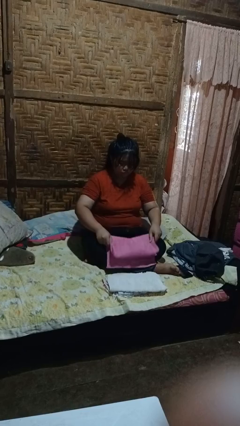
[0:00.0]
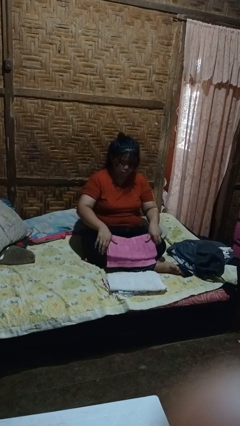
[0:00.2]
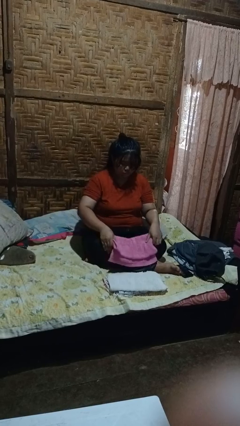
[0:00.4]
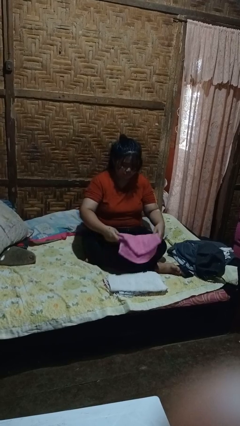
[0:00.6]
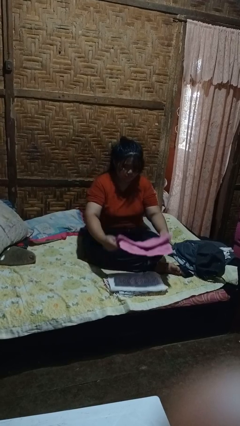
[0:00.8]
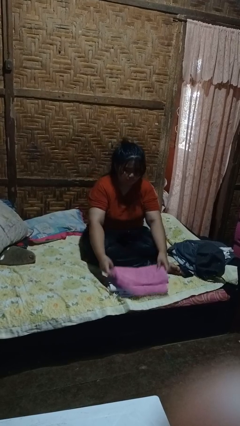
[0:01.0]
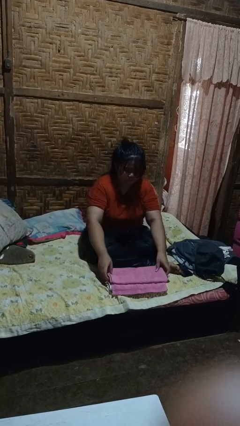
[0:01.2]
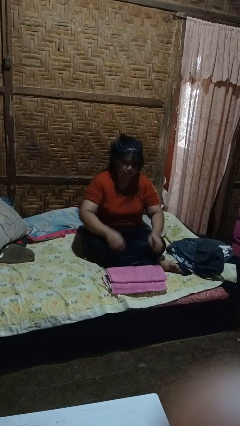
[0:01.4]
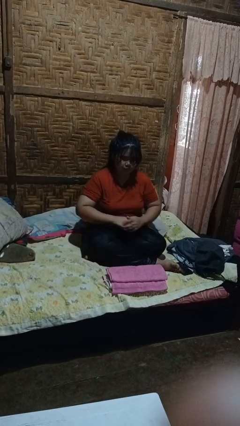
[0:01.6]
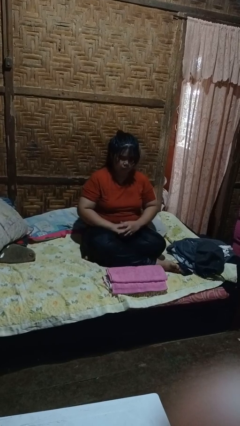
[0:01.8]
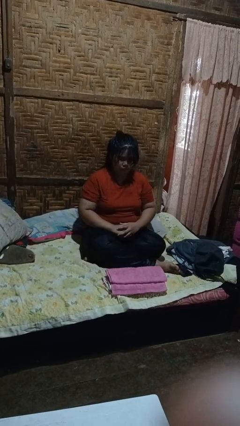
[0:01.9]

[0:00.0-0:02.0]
person folds towel

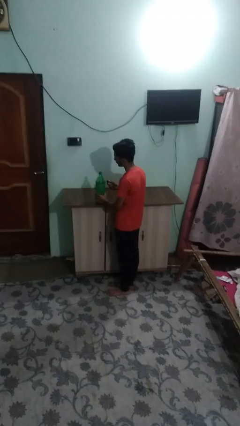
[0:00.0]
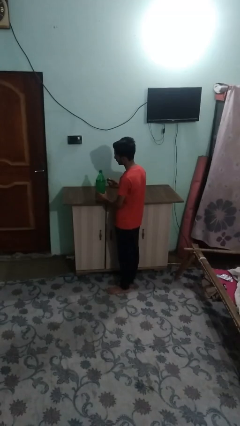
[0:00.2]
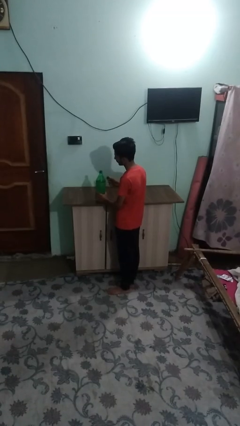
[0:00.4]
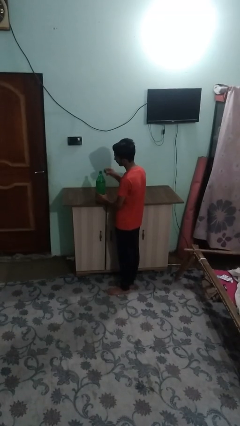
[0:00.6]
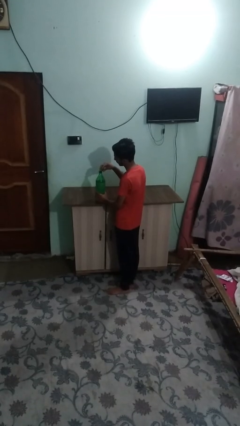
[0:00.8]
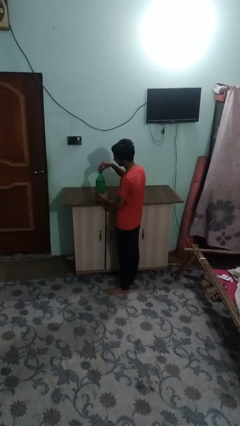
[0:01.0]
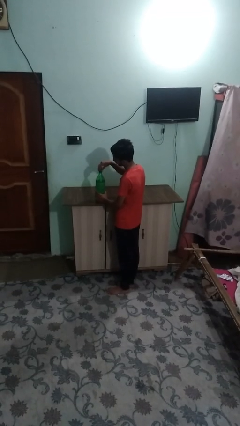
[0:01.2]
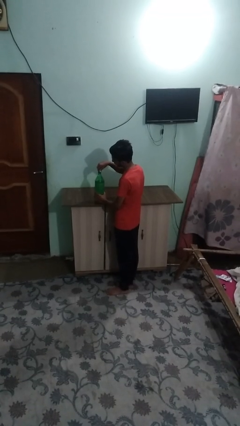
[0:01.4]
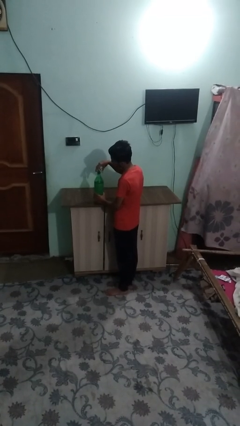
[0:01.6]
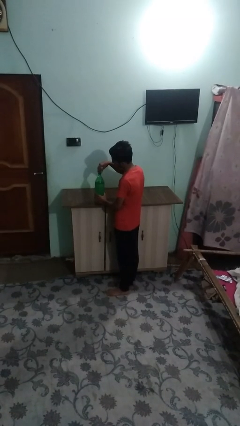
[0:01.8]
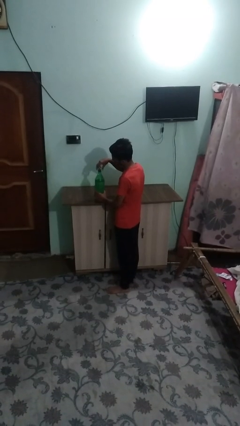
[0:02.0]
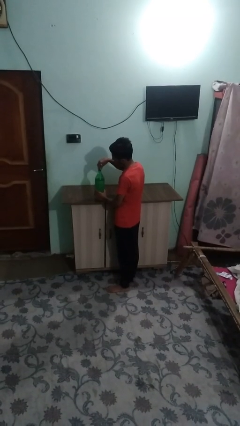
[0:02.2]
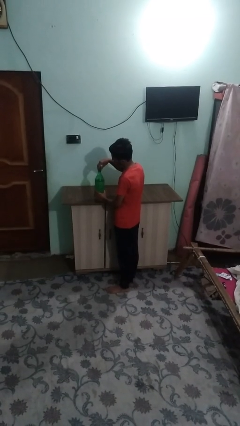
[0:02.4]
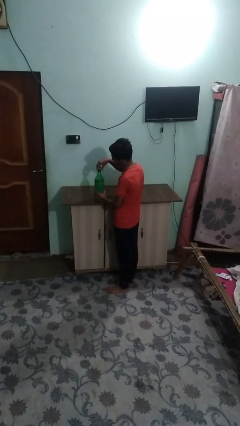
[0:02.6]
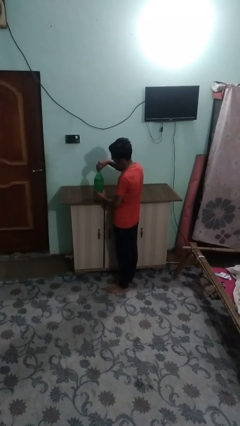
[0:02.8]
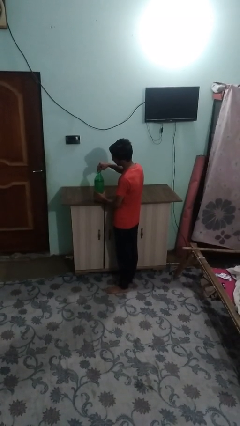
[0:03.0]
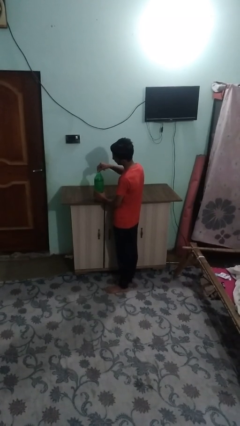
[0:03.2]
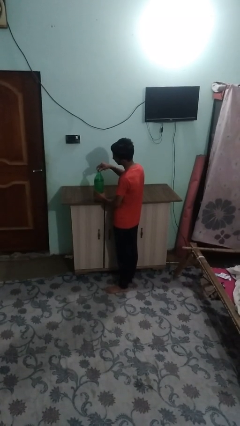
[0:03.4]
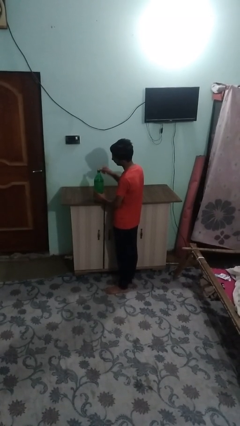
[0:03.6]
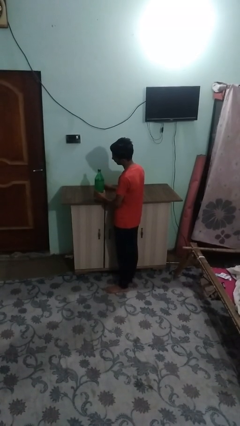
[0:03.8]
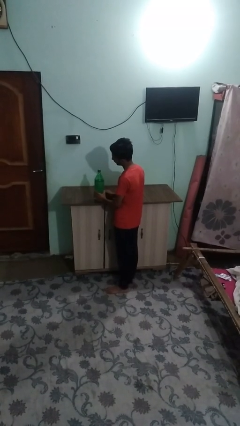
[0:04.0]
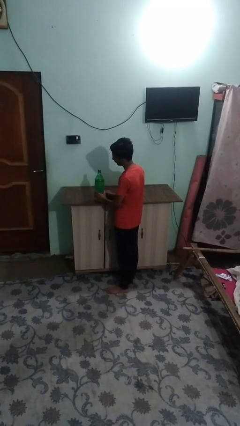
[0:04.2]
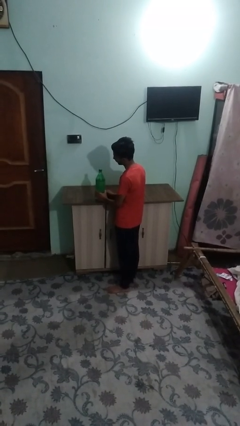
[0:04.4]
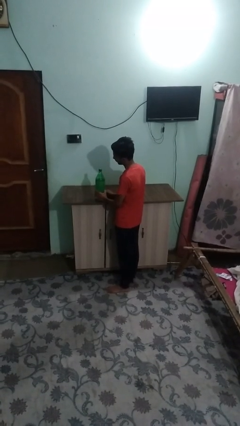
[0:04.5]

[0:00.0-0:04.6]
person screws lid to bottle

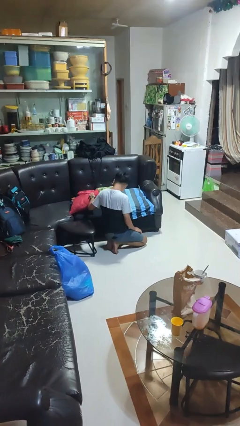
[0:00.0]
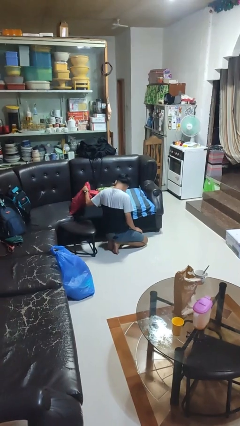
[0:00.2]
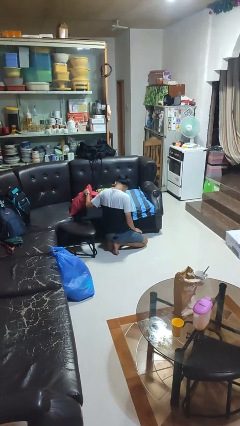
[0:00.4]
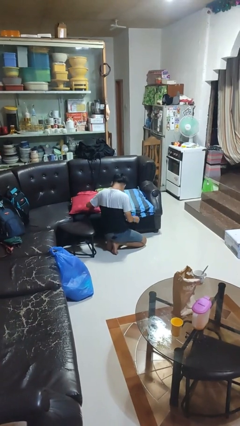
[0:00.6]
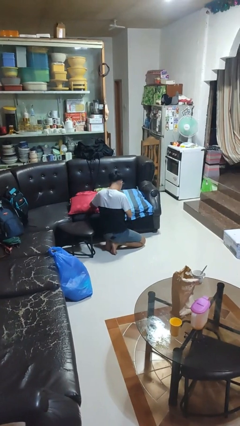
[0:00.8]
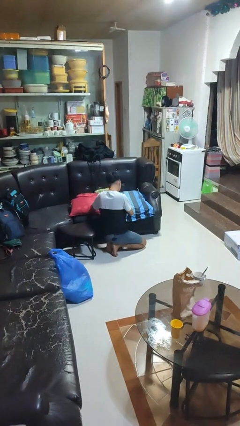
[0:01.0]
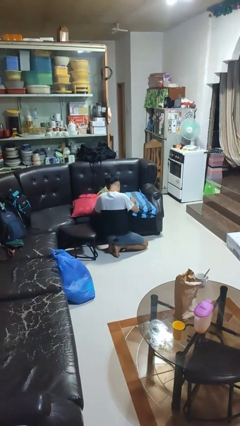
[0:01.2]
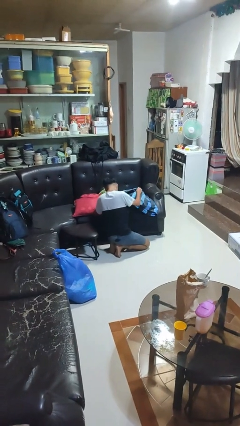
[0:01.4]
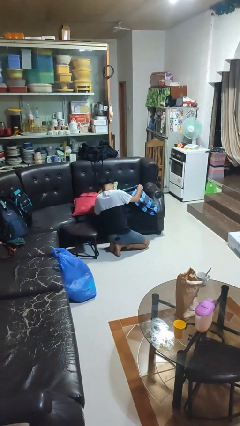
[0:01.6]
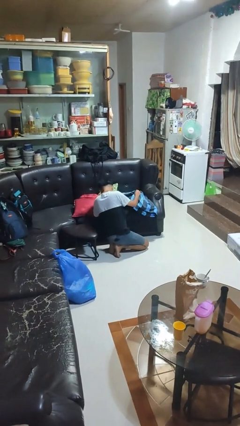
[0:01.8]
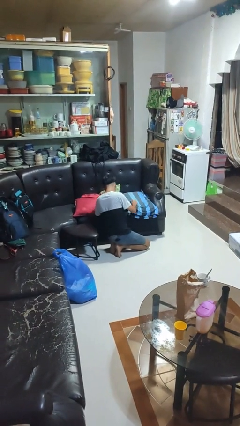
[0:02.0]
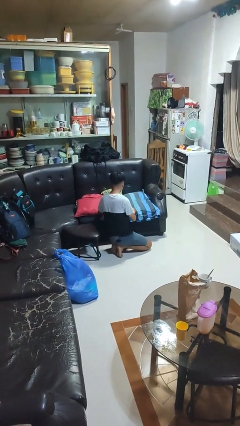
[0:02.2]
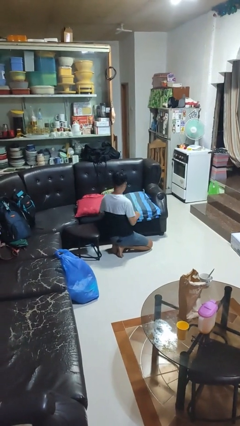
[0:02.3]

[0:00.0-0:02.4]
person searches in couch

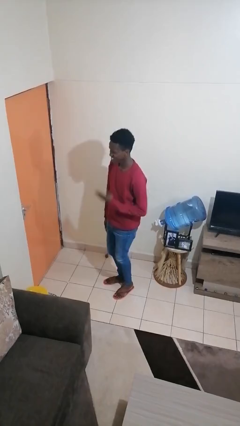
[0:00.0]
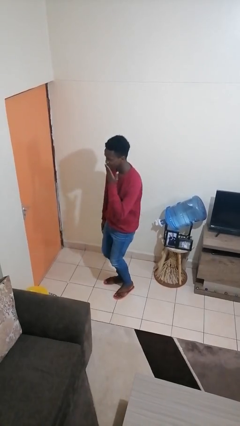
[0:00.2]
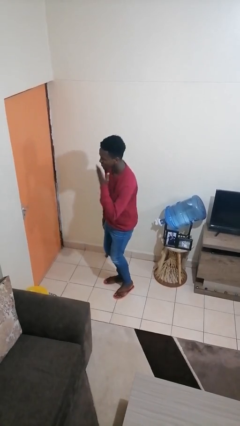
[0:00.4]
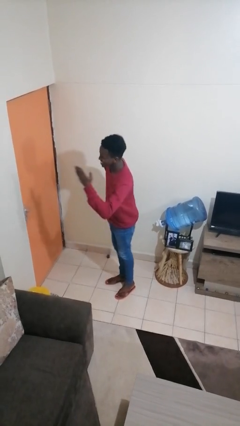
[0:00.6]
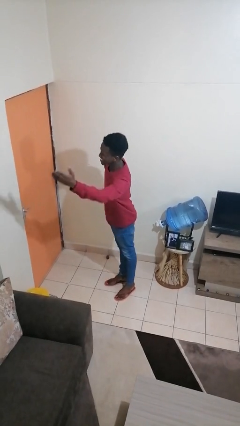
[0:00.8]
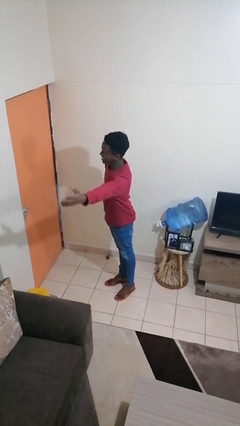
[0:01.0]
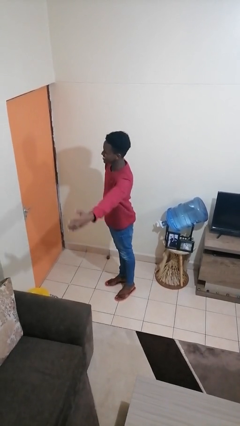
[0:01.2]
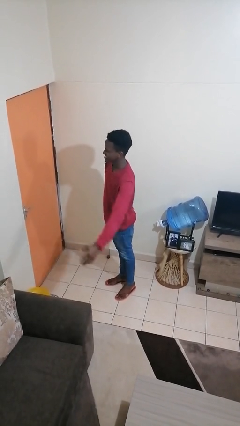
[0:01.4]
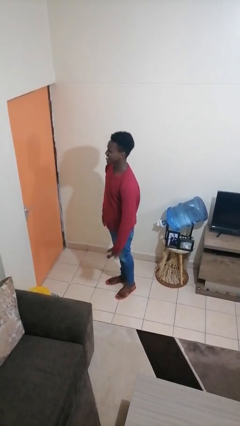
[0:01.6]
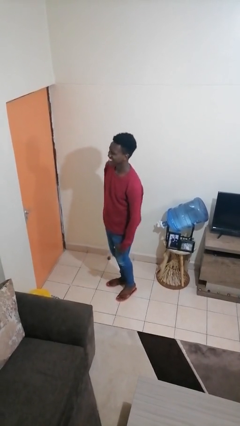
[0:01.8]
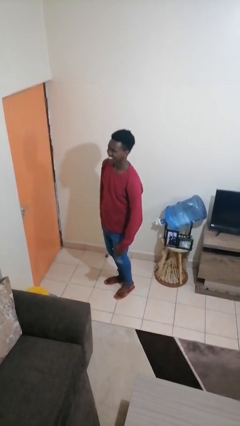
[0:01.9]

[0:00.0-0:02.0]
person gestures blow kiss

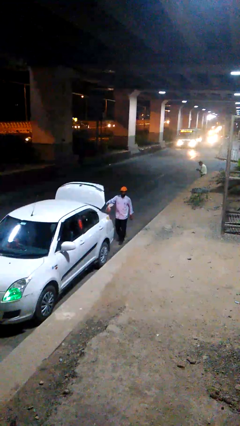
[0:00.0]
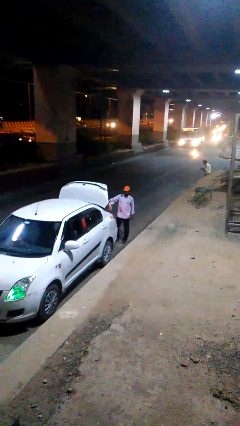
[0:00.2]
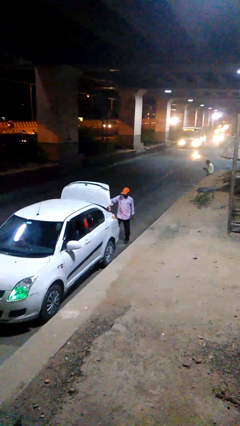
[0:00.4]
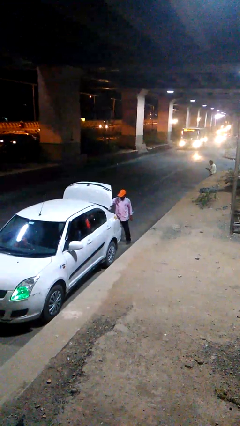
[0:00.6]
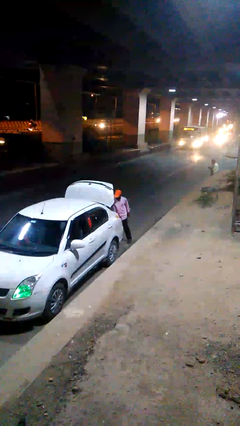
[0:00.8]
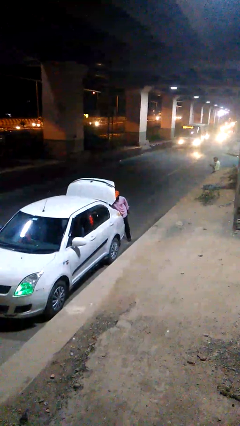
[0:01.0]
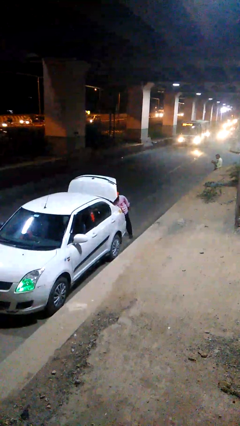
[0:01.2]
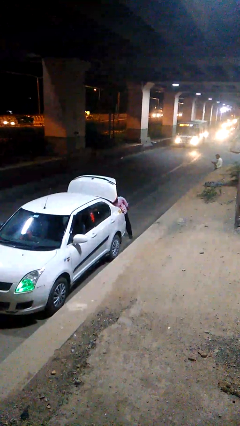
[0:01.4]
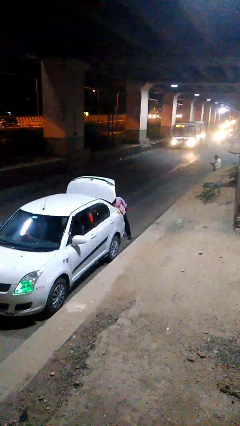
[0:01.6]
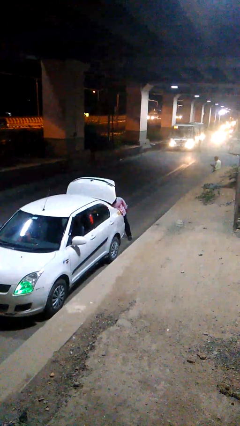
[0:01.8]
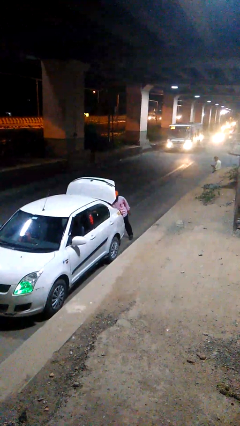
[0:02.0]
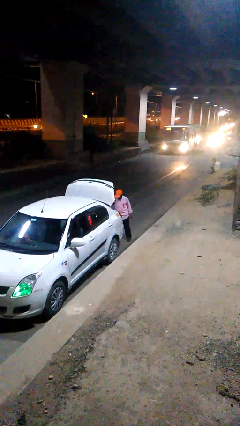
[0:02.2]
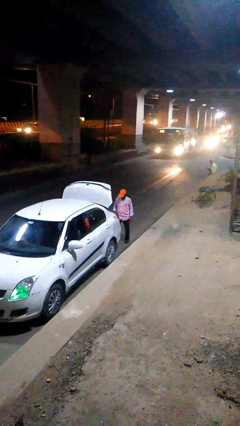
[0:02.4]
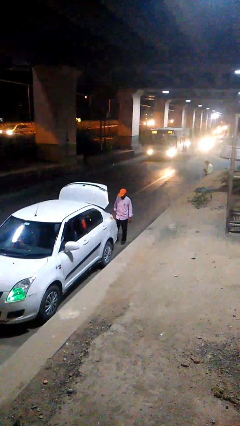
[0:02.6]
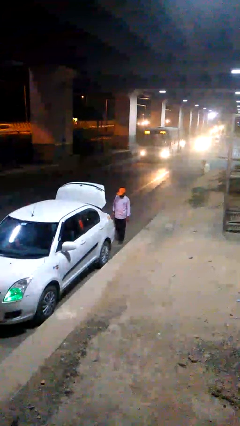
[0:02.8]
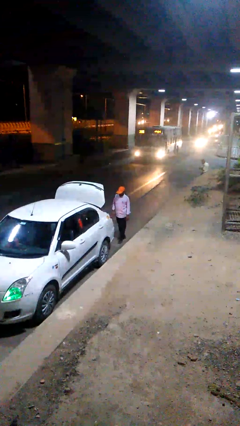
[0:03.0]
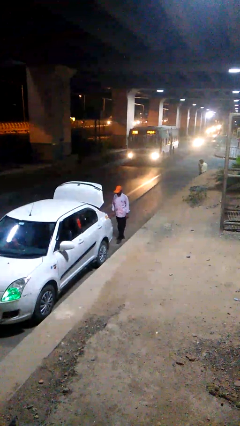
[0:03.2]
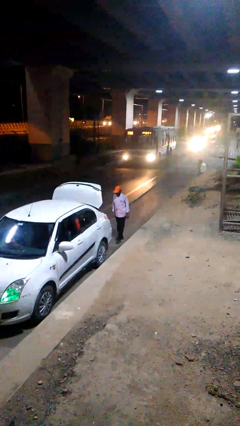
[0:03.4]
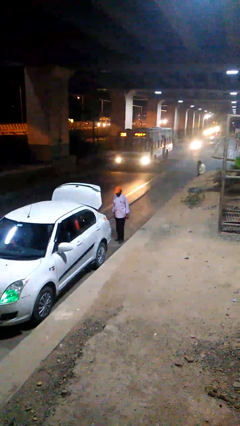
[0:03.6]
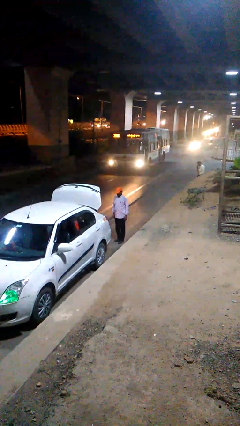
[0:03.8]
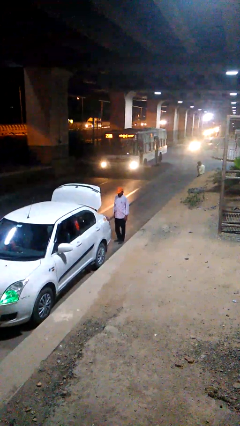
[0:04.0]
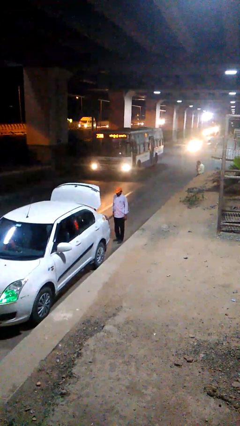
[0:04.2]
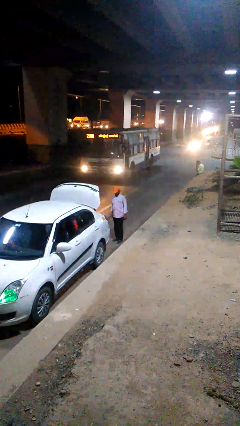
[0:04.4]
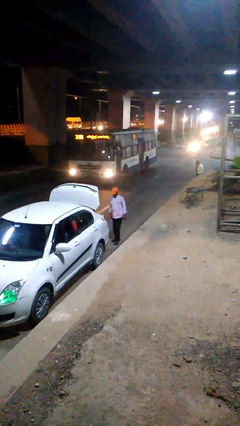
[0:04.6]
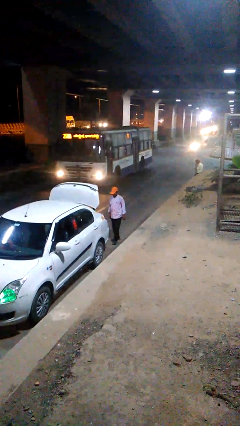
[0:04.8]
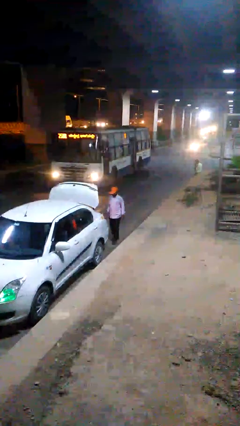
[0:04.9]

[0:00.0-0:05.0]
person loads car

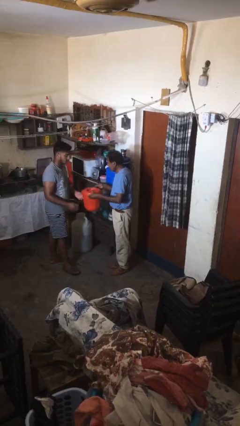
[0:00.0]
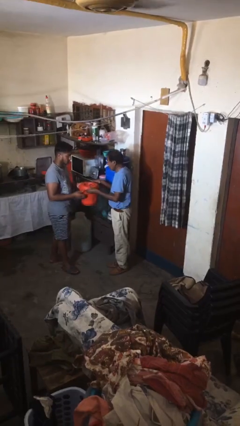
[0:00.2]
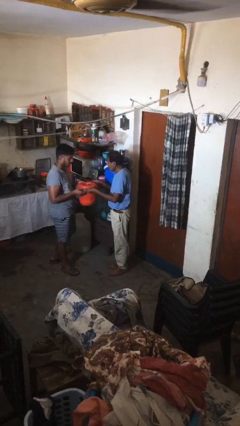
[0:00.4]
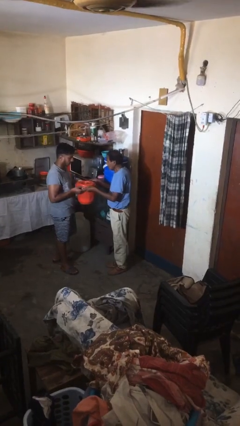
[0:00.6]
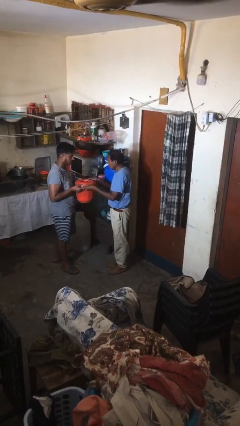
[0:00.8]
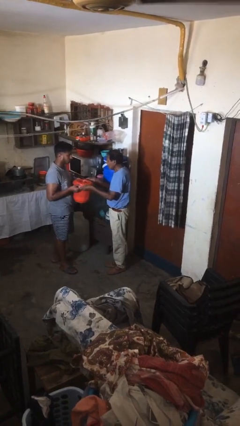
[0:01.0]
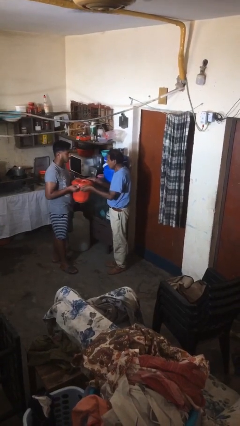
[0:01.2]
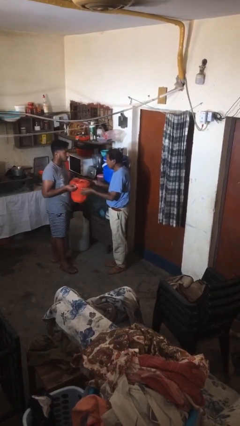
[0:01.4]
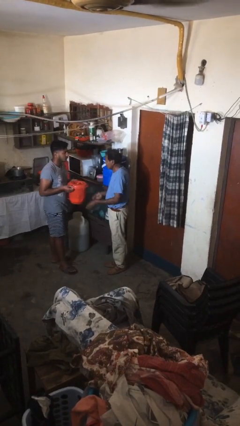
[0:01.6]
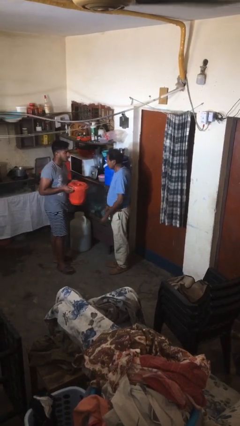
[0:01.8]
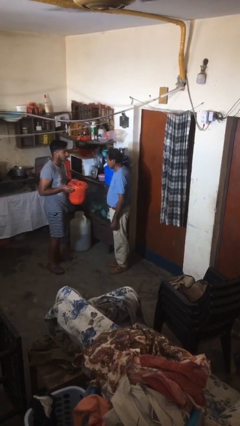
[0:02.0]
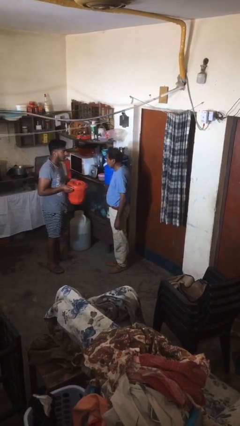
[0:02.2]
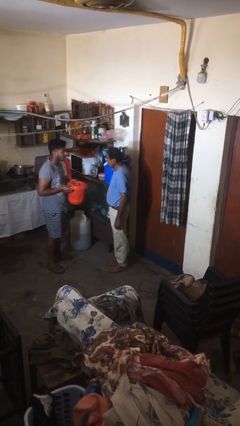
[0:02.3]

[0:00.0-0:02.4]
person transfers object to person
